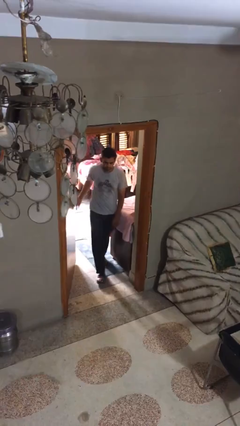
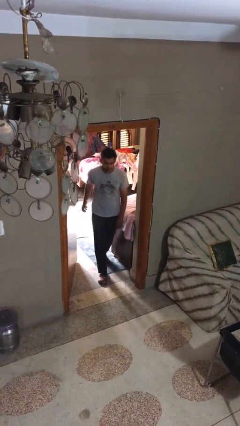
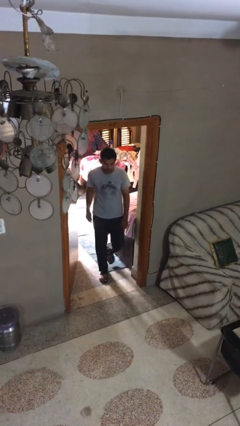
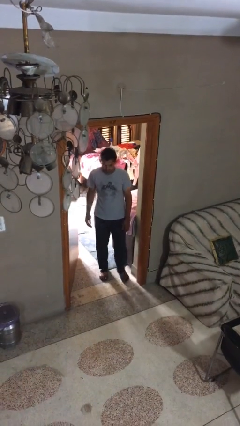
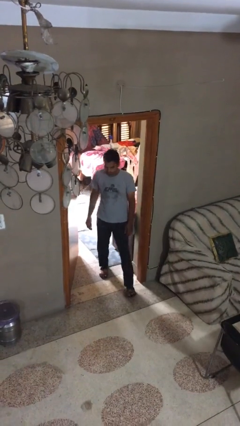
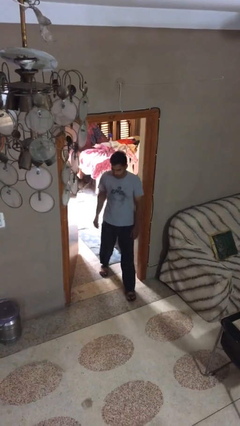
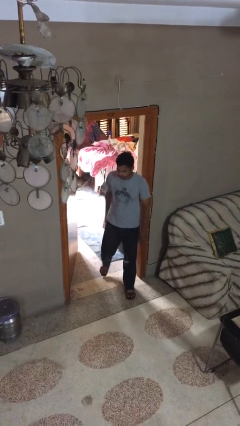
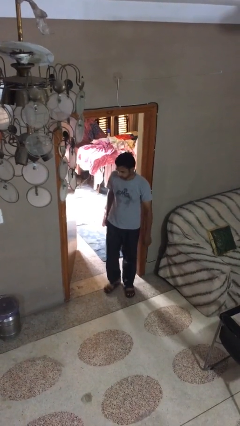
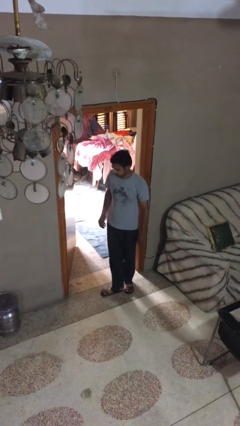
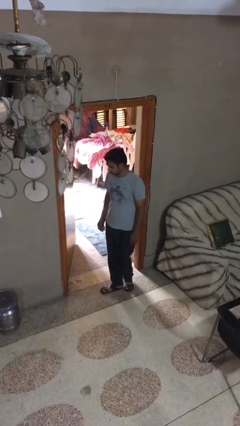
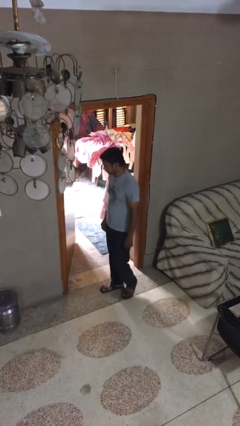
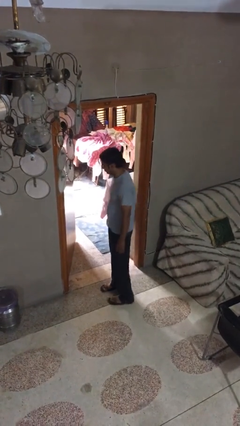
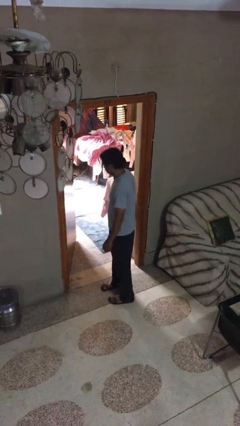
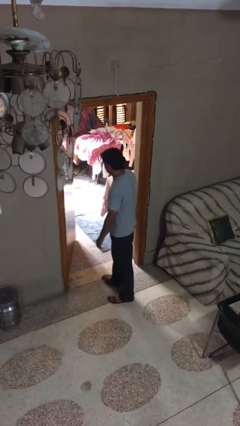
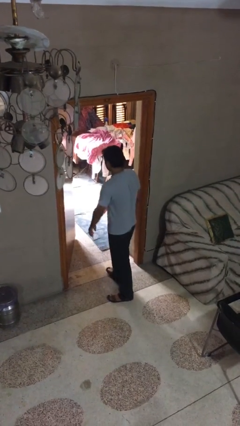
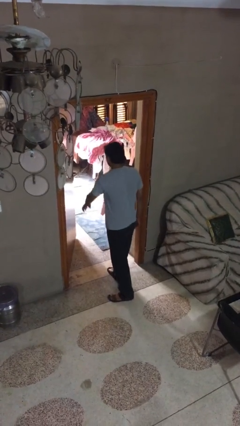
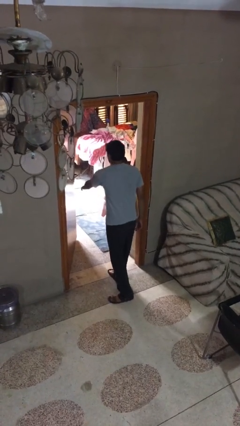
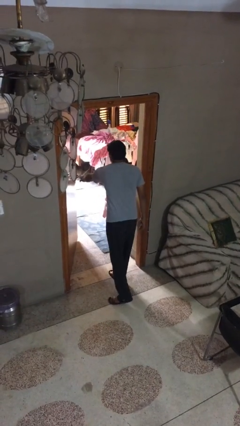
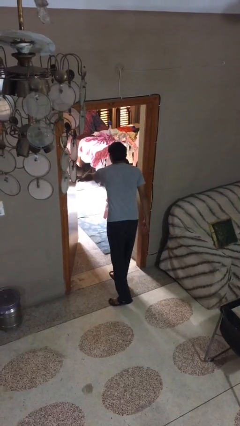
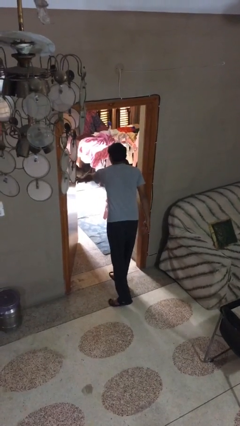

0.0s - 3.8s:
person enters scene through structure

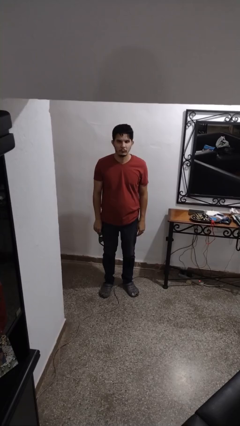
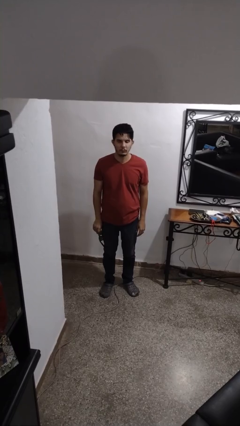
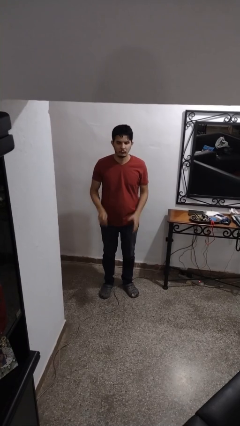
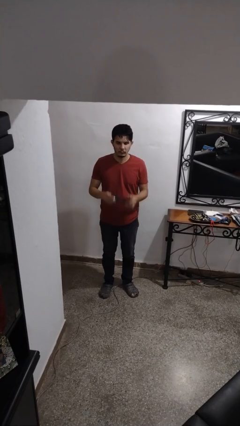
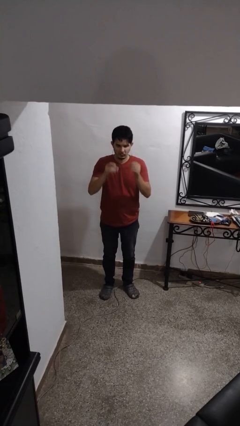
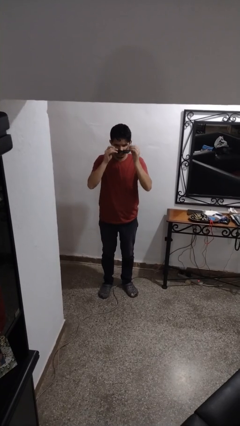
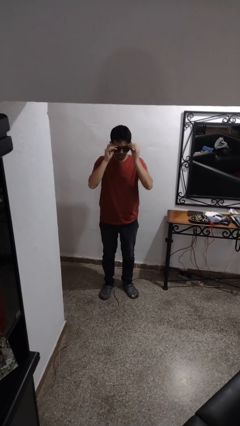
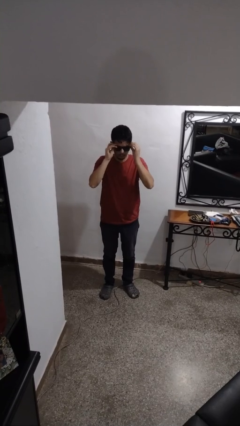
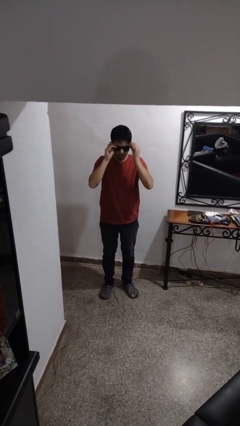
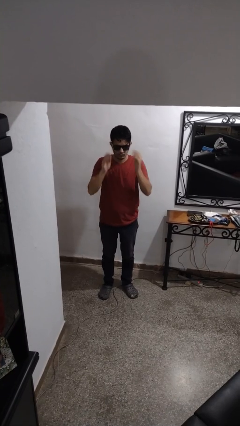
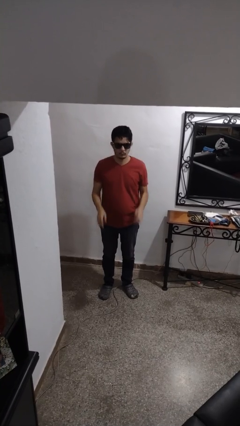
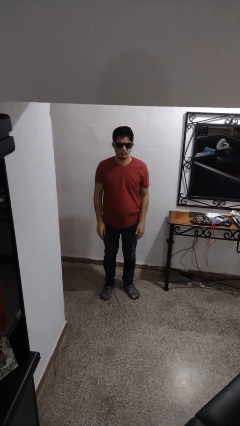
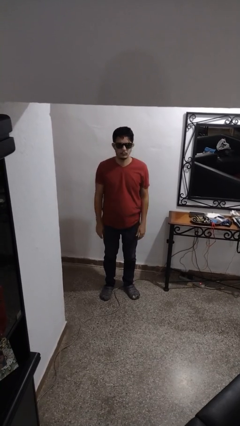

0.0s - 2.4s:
person puts on sunglasses

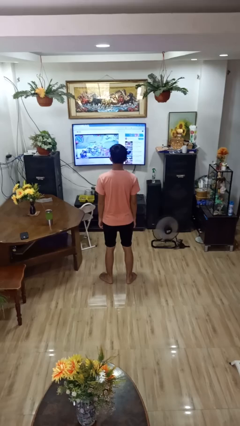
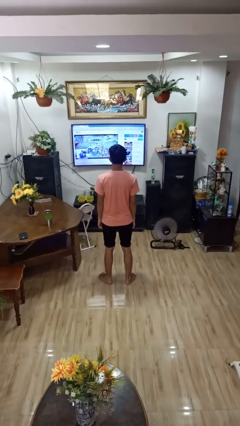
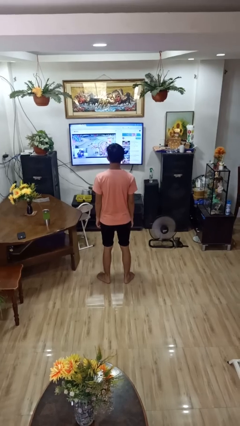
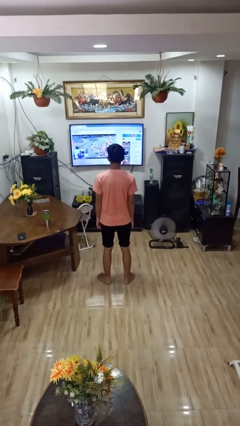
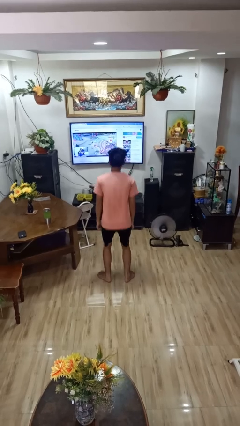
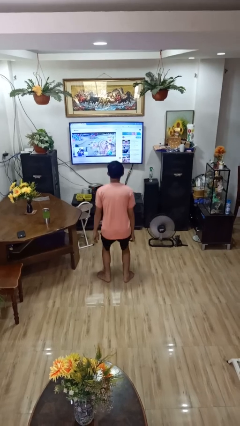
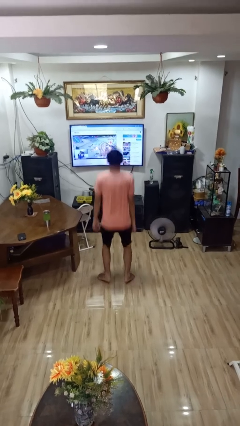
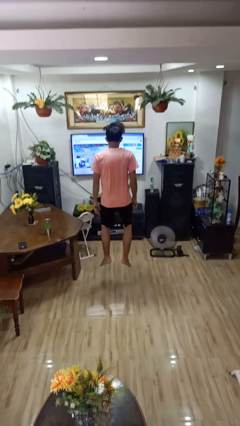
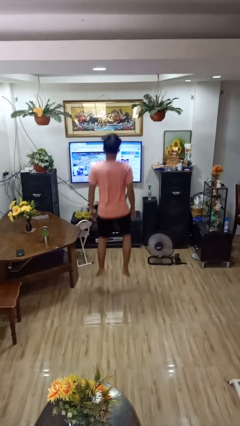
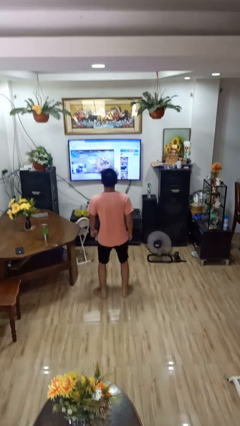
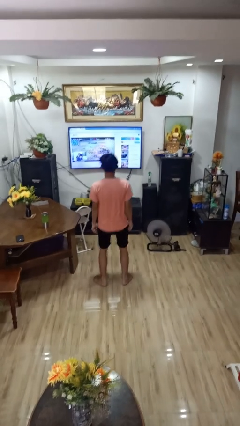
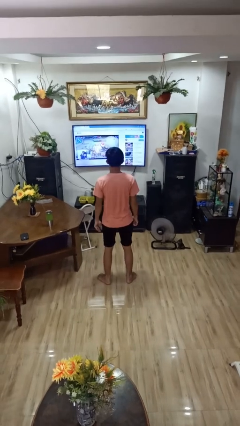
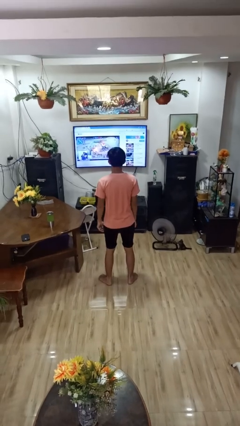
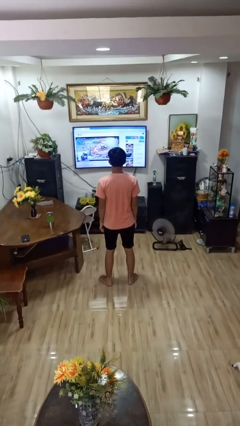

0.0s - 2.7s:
person jumps

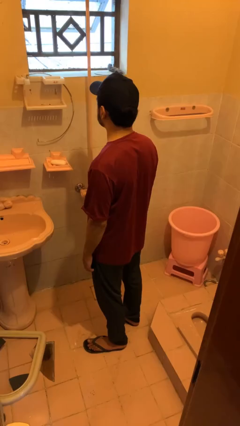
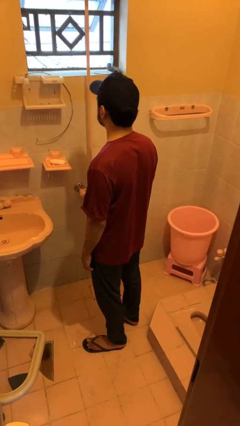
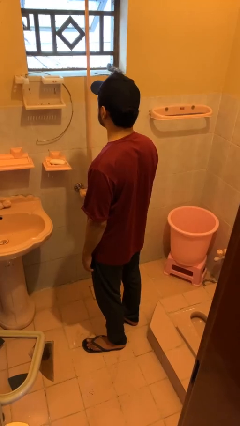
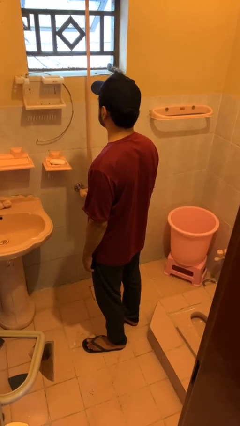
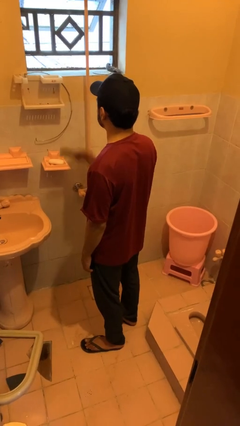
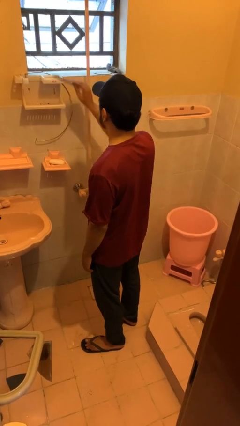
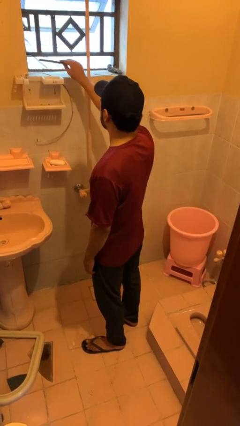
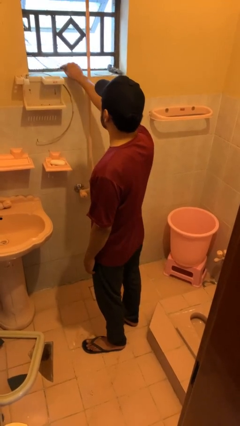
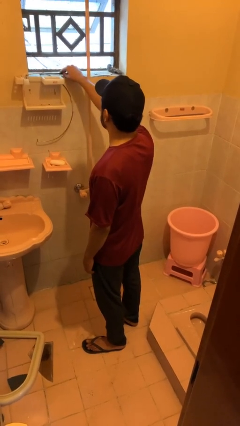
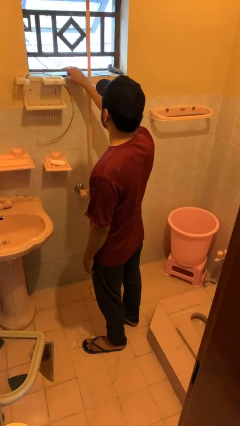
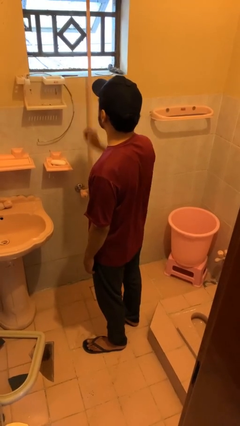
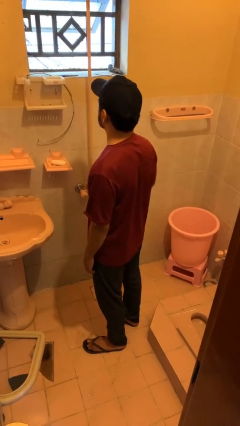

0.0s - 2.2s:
person puts down object on countertop

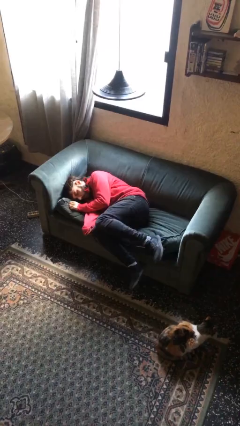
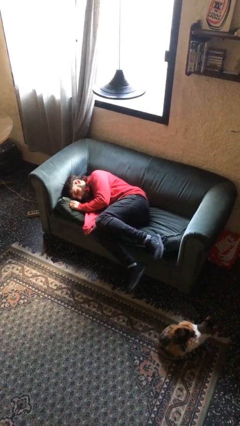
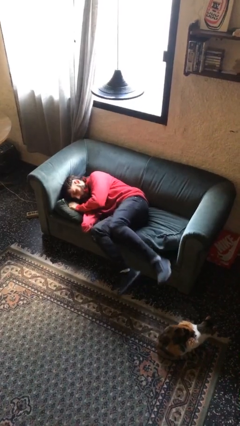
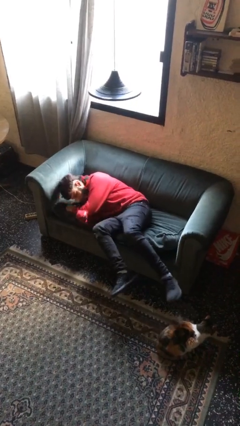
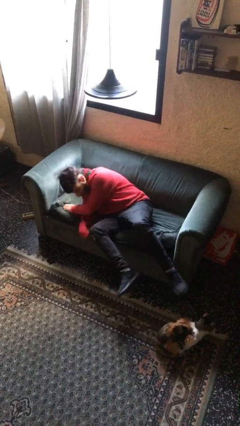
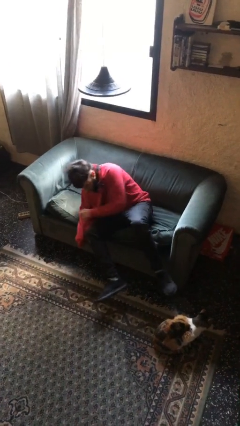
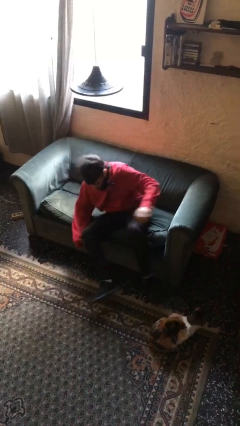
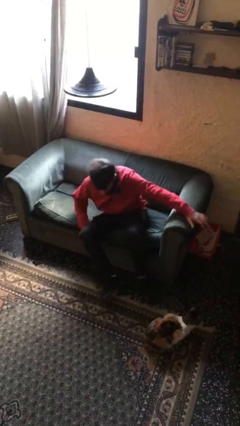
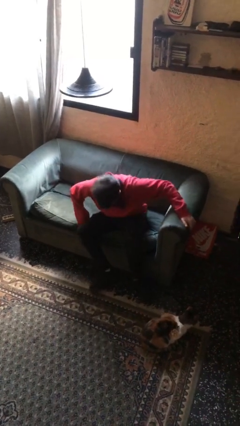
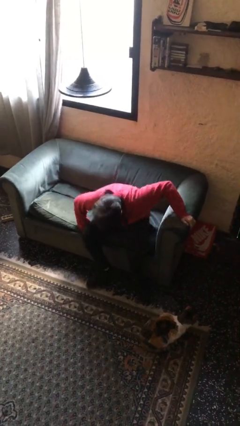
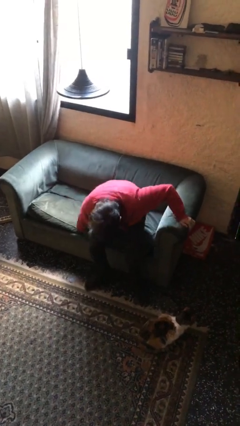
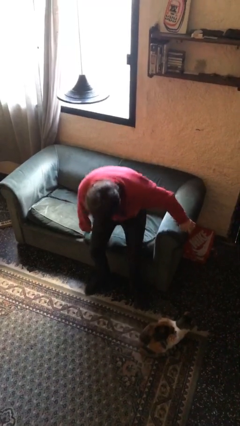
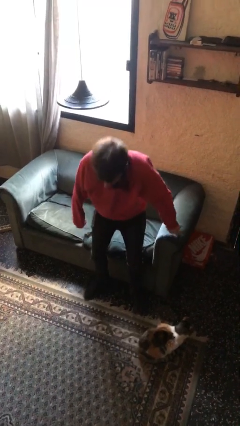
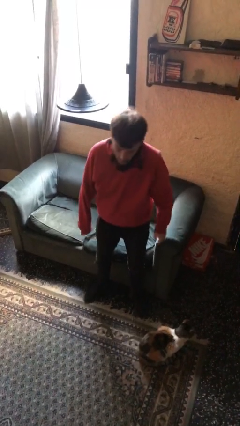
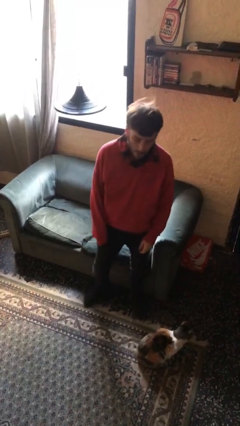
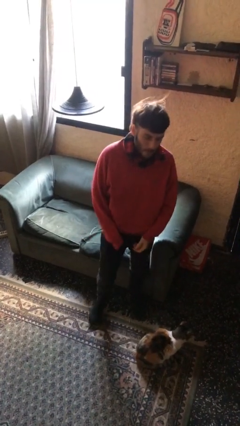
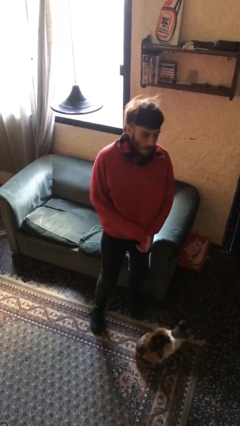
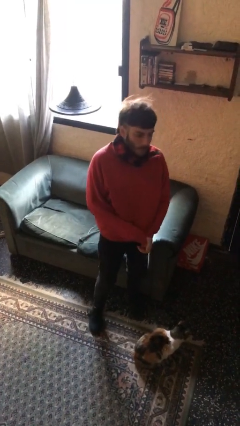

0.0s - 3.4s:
person stands up

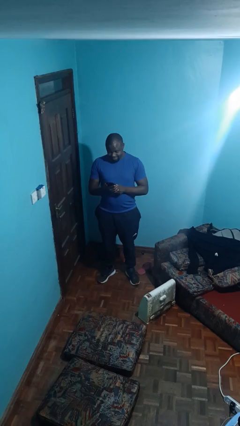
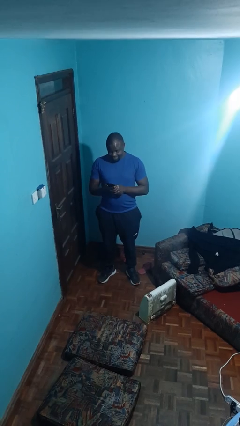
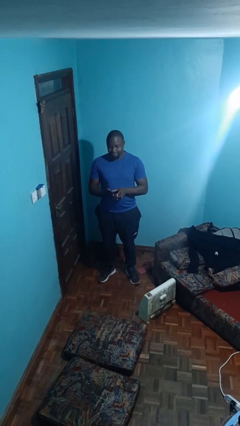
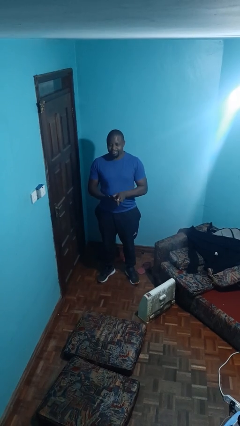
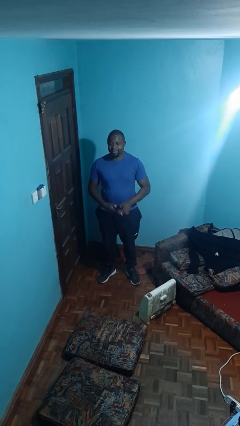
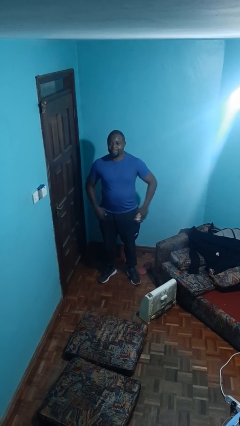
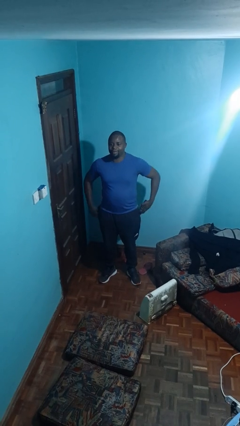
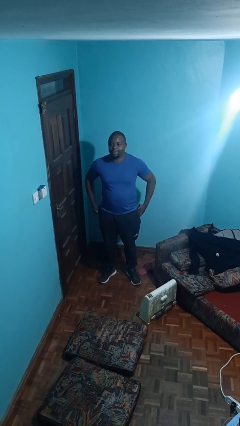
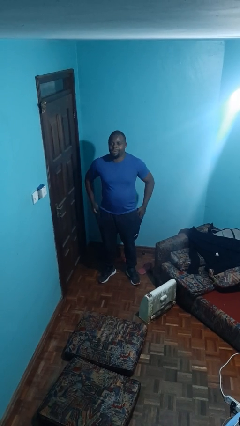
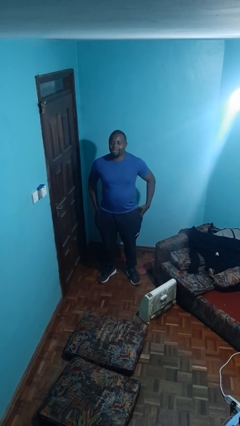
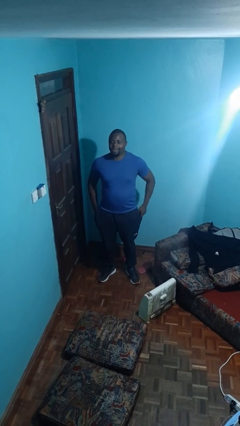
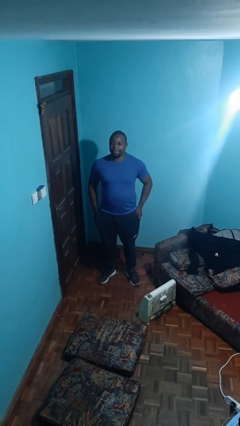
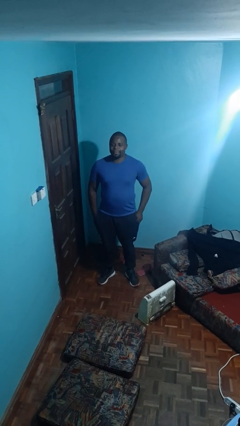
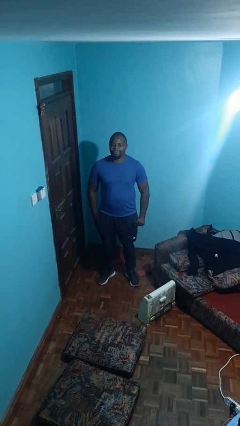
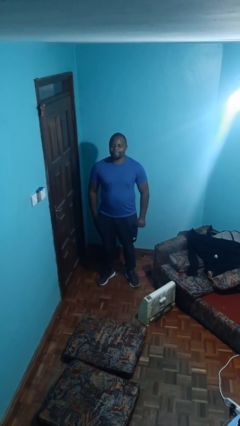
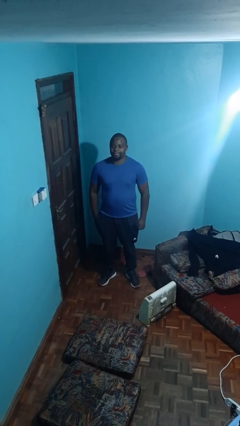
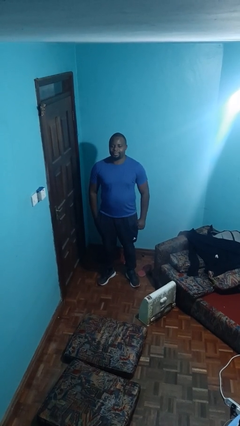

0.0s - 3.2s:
person puts phone into pocket
